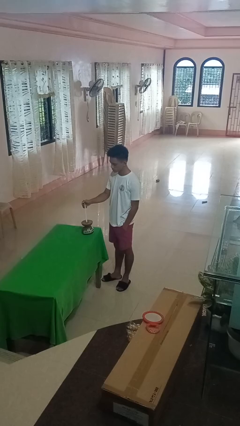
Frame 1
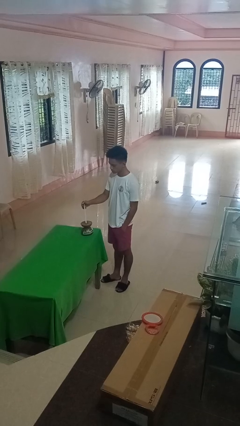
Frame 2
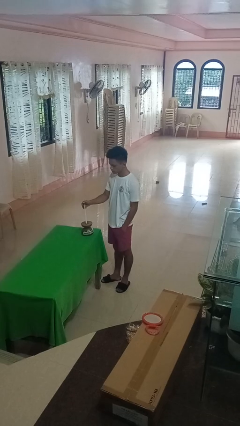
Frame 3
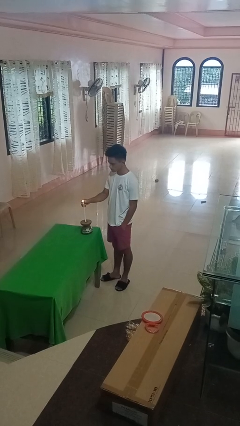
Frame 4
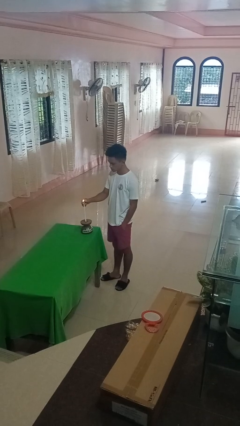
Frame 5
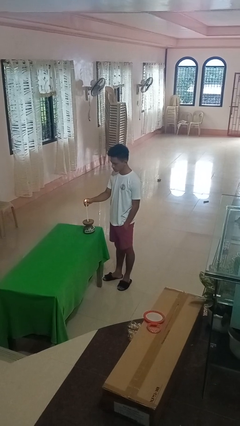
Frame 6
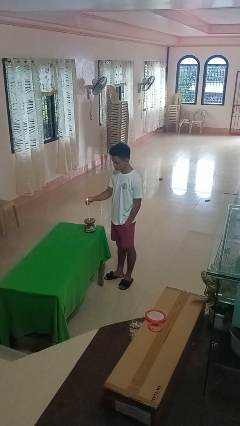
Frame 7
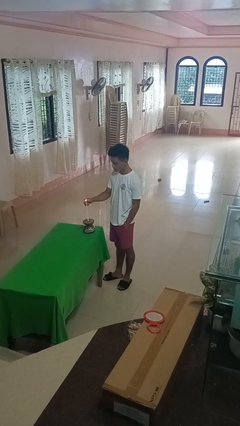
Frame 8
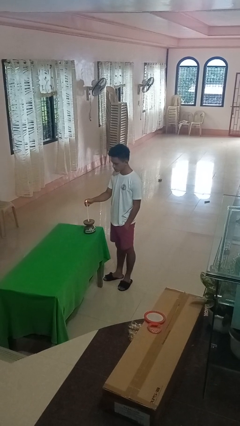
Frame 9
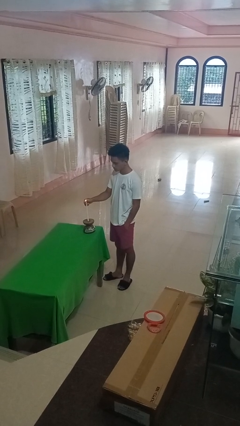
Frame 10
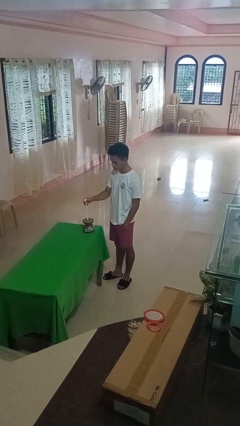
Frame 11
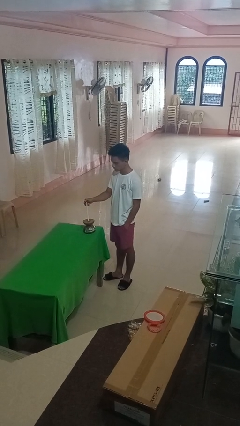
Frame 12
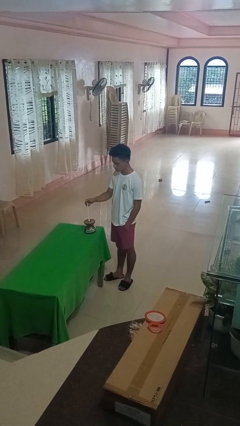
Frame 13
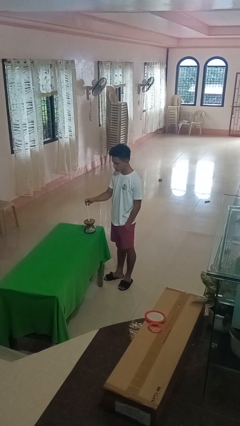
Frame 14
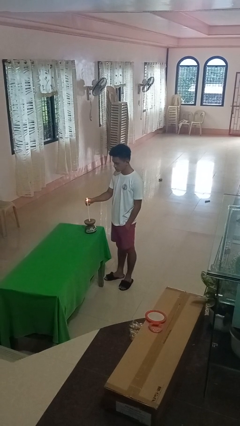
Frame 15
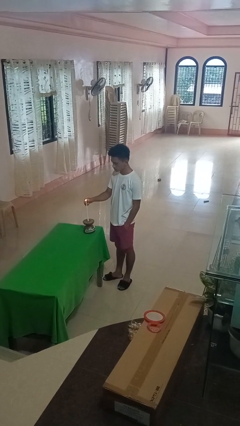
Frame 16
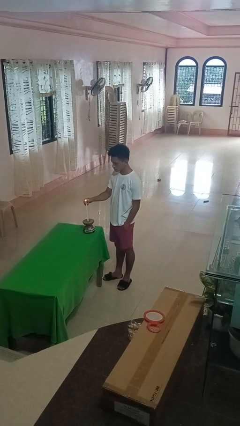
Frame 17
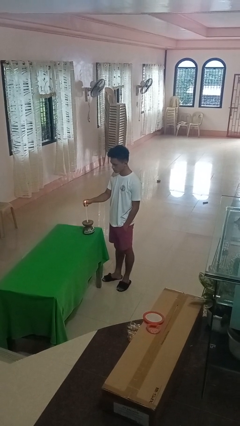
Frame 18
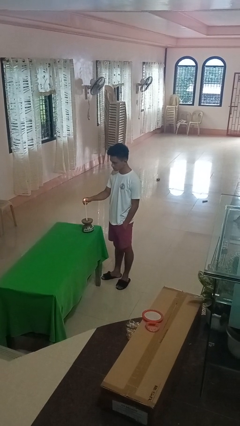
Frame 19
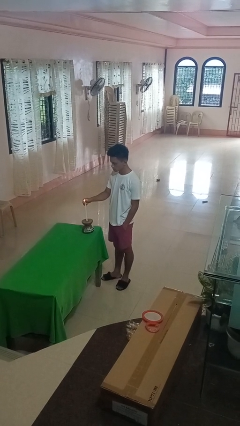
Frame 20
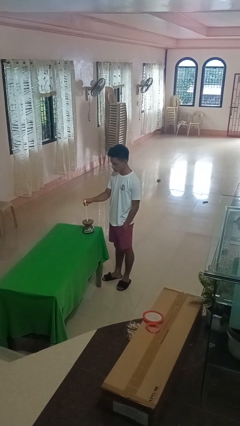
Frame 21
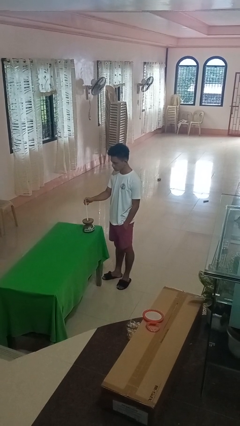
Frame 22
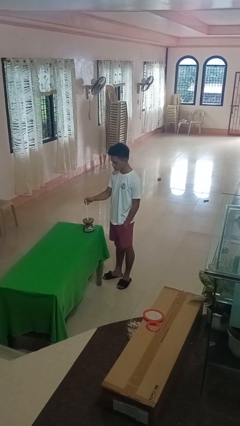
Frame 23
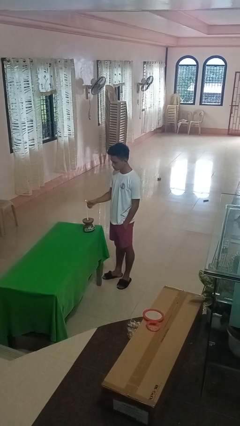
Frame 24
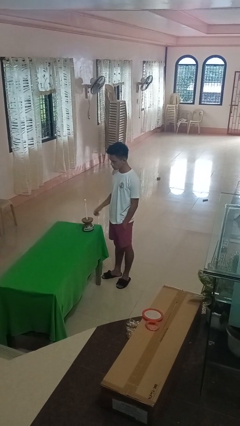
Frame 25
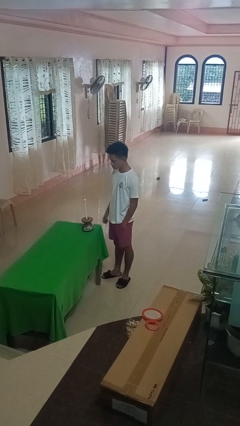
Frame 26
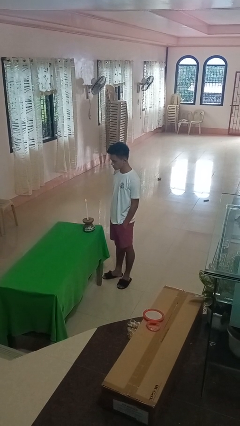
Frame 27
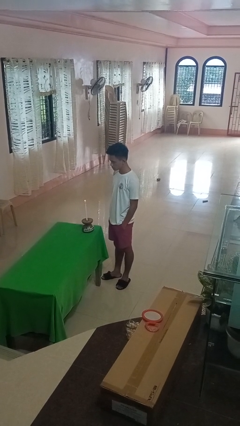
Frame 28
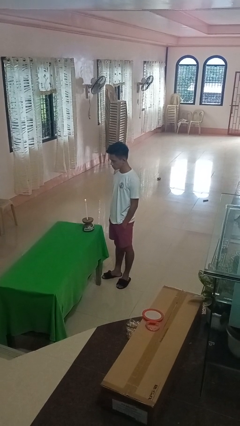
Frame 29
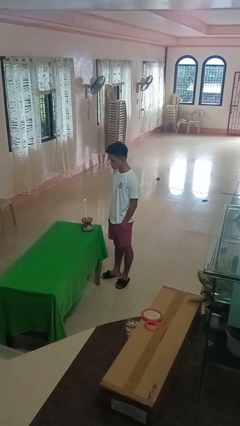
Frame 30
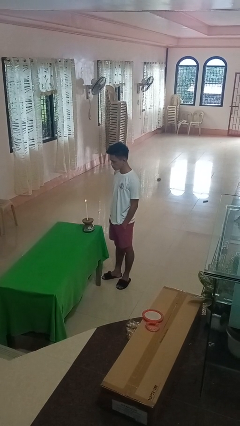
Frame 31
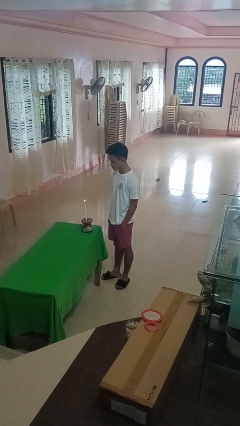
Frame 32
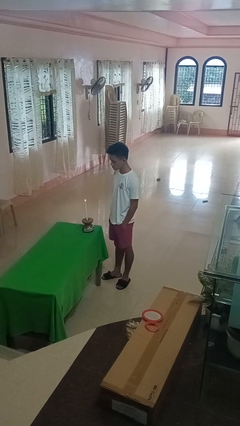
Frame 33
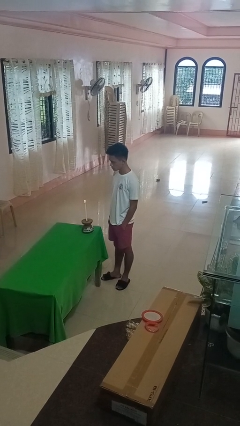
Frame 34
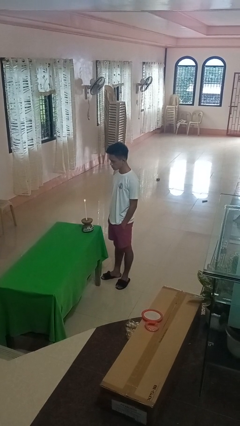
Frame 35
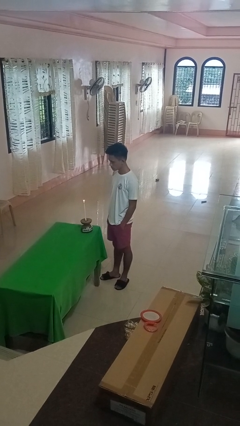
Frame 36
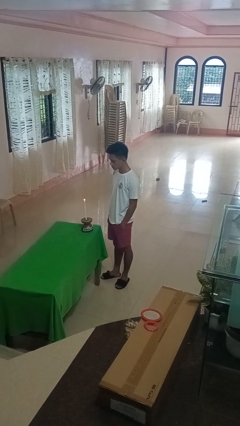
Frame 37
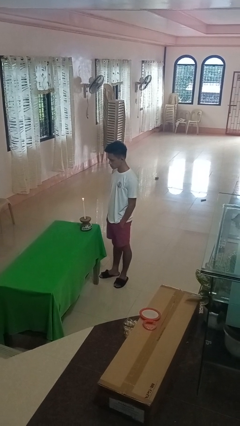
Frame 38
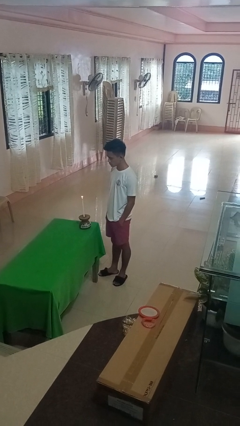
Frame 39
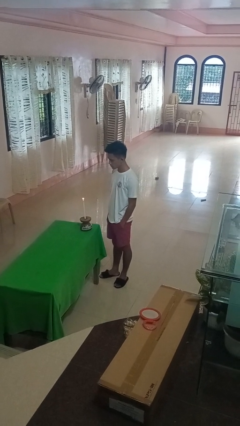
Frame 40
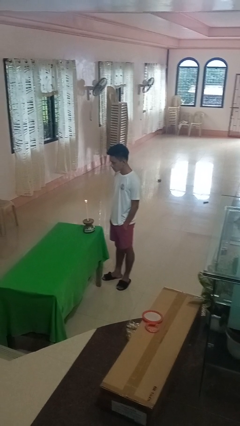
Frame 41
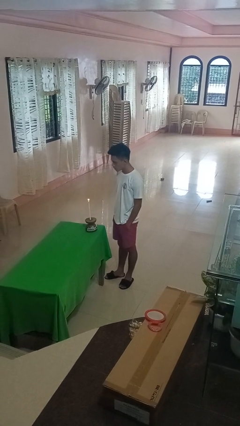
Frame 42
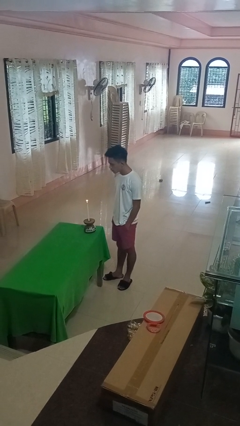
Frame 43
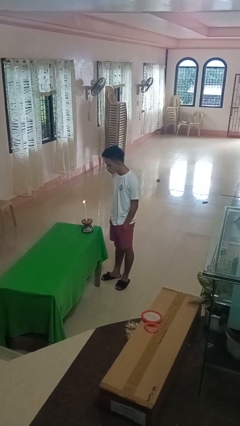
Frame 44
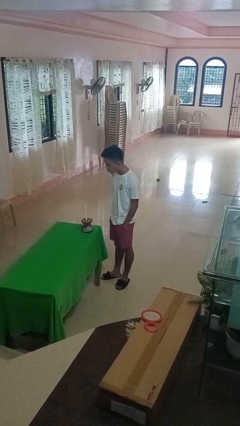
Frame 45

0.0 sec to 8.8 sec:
person lights candle

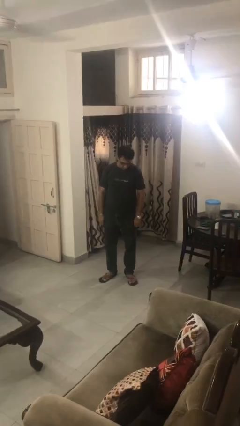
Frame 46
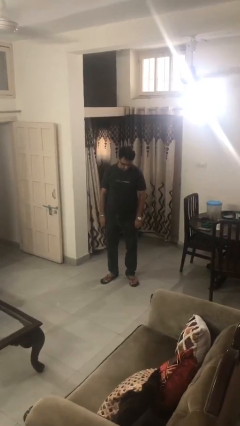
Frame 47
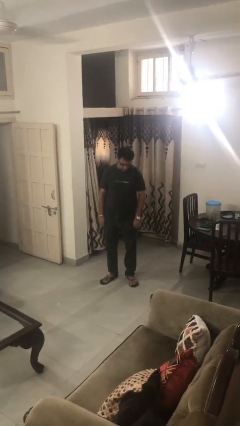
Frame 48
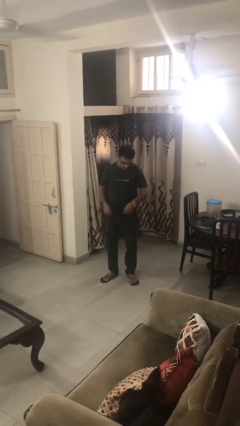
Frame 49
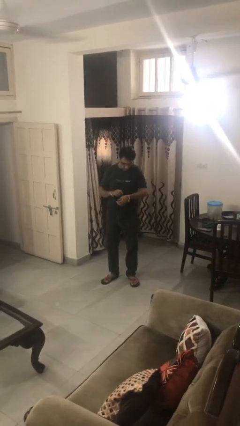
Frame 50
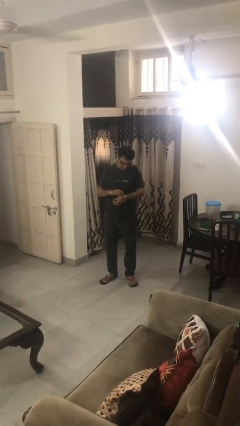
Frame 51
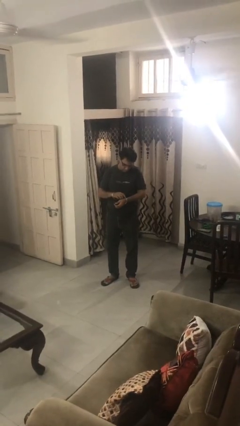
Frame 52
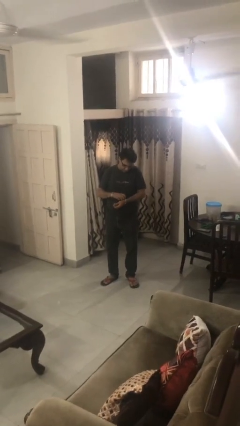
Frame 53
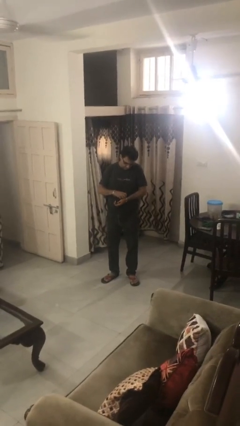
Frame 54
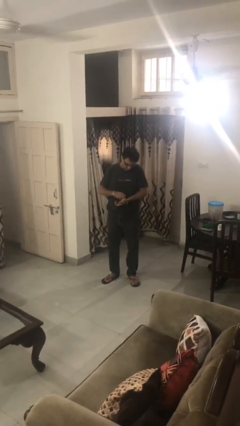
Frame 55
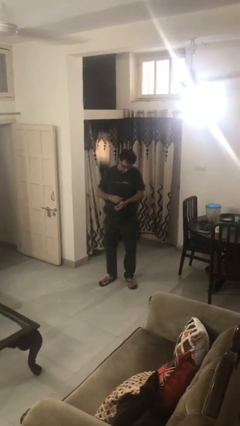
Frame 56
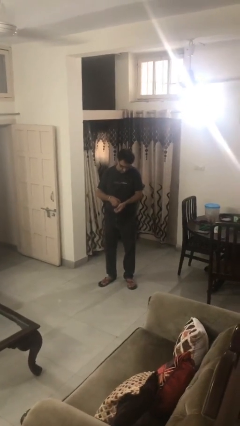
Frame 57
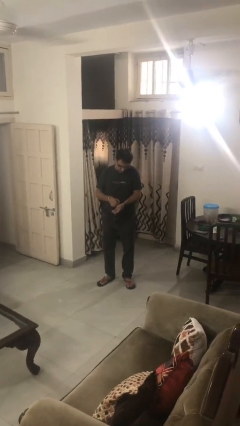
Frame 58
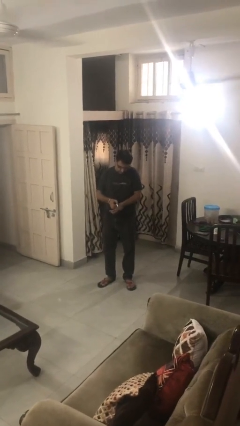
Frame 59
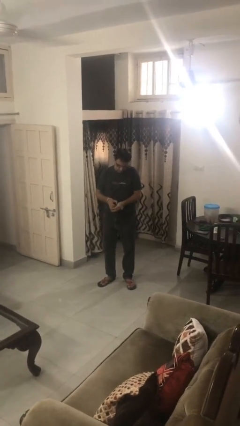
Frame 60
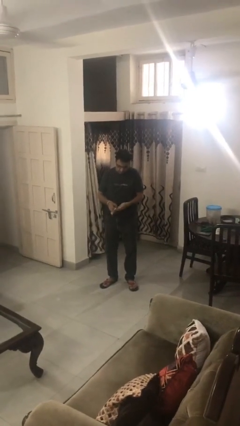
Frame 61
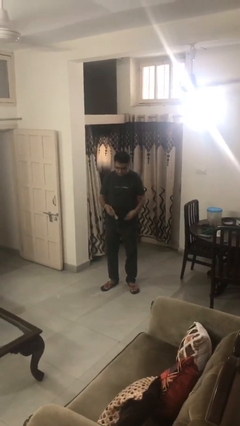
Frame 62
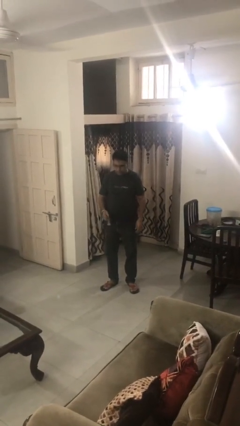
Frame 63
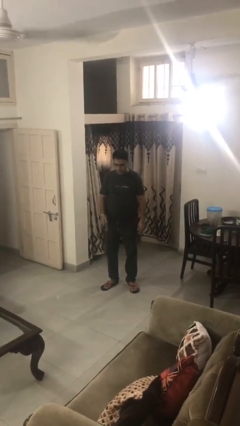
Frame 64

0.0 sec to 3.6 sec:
person takes off wristwatch

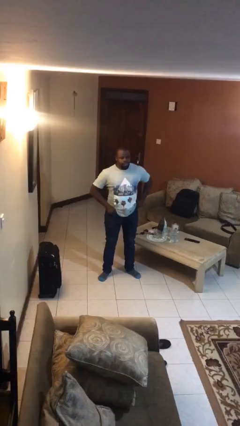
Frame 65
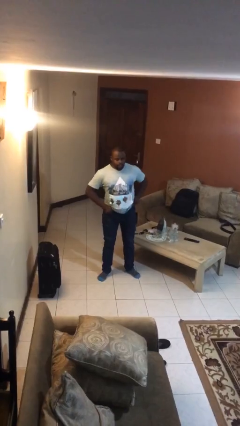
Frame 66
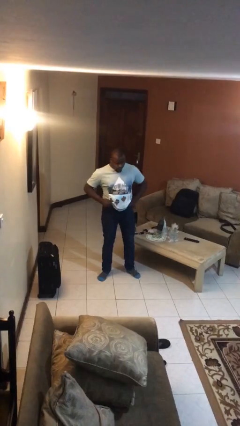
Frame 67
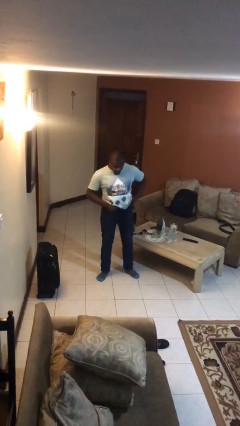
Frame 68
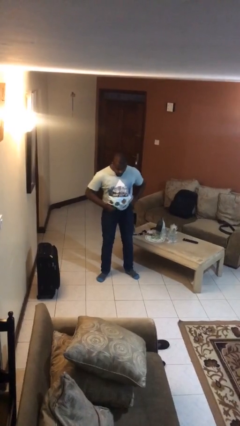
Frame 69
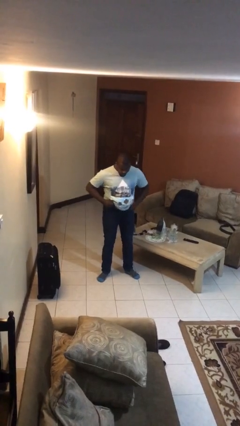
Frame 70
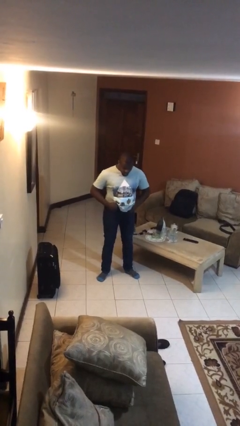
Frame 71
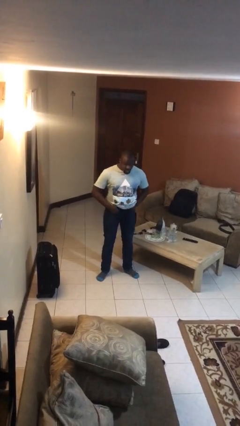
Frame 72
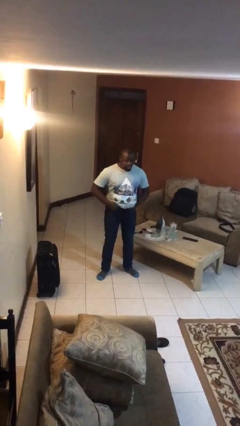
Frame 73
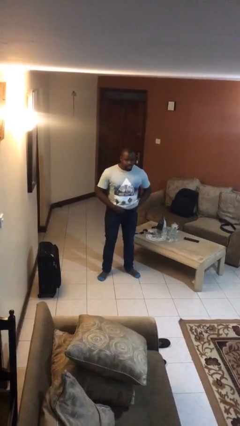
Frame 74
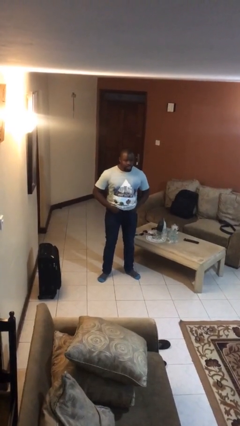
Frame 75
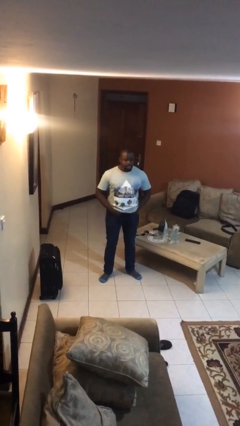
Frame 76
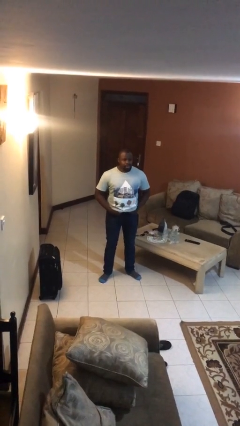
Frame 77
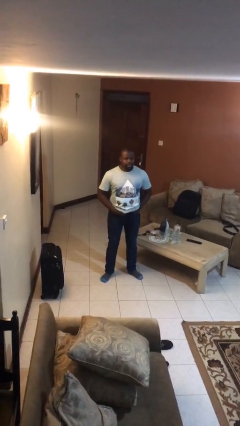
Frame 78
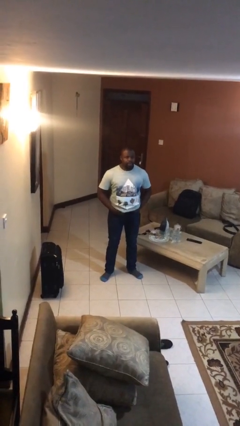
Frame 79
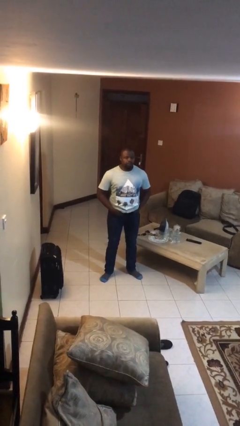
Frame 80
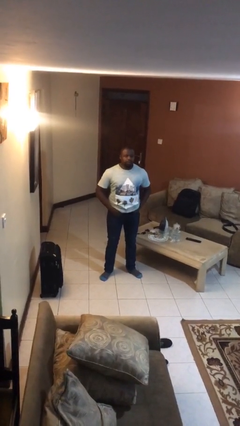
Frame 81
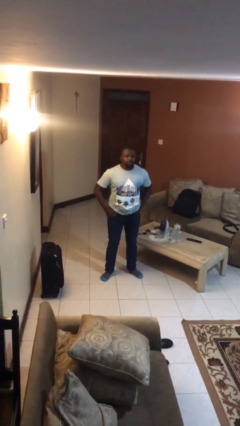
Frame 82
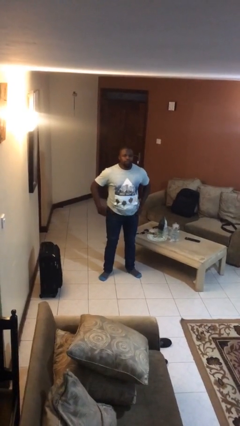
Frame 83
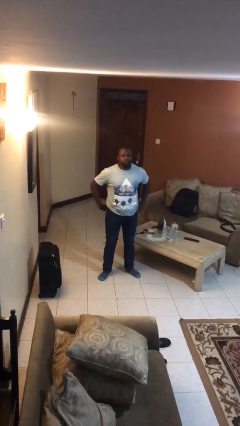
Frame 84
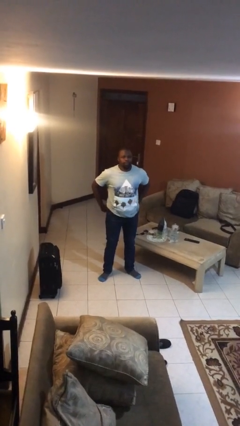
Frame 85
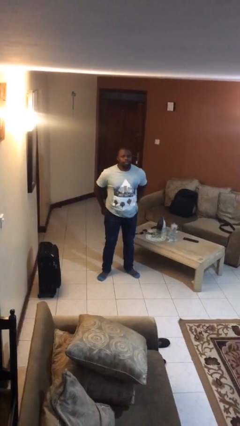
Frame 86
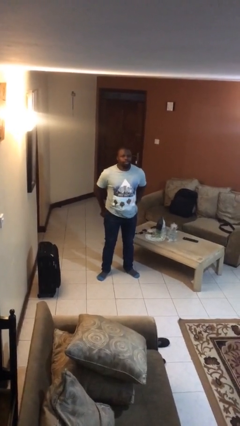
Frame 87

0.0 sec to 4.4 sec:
person hikes up pants

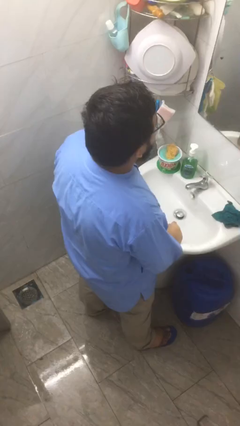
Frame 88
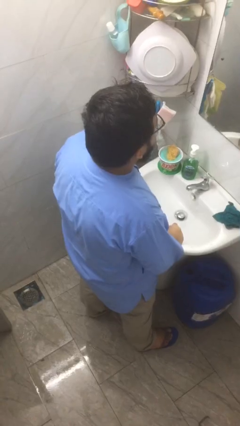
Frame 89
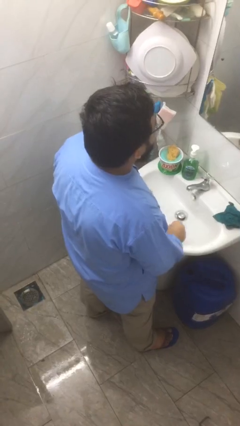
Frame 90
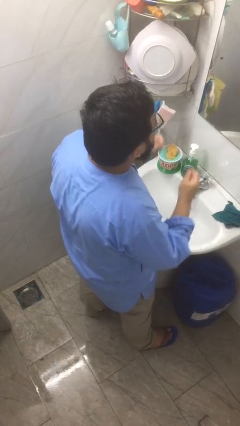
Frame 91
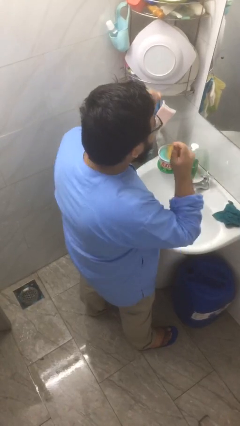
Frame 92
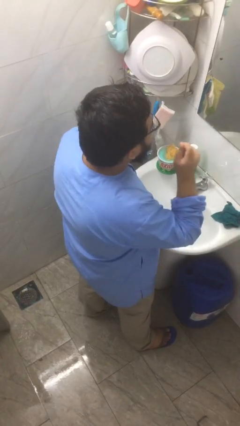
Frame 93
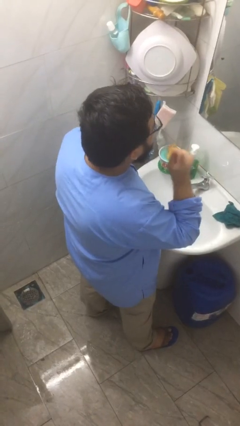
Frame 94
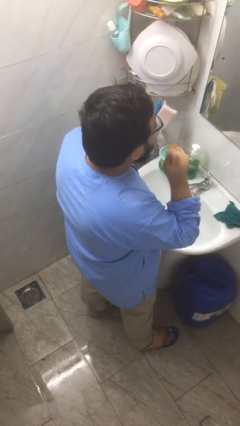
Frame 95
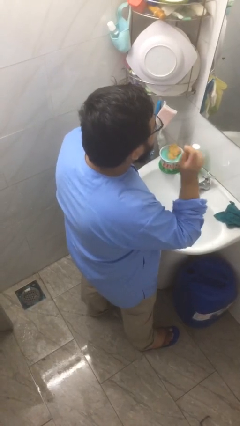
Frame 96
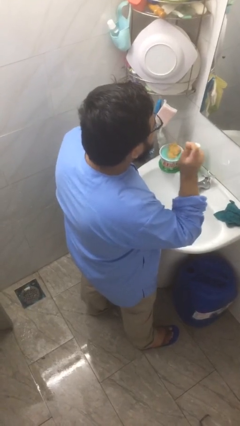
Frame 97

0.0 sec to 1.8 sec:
person flosses
